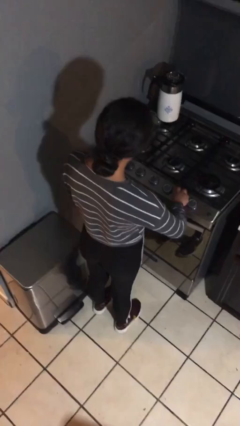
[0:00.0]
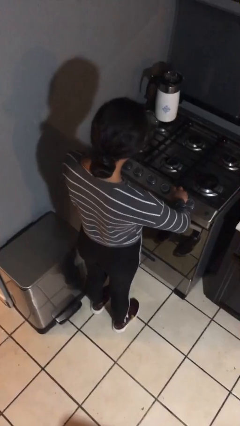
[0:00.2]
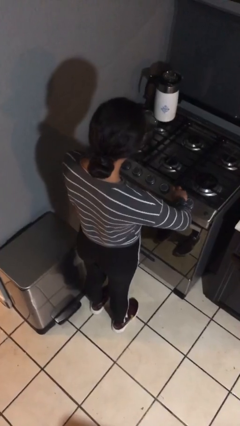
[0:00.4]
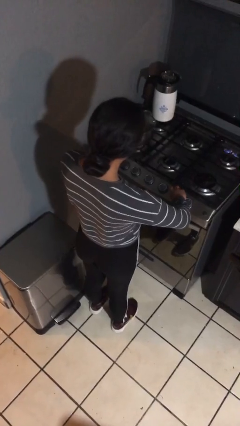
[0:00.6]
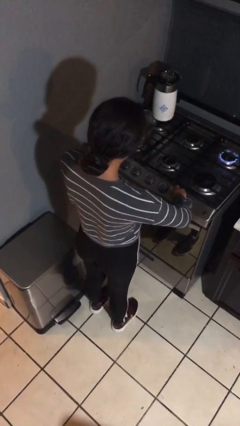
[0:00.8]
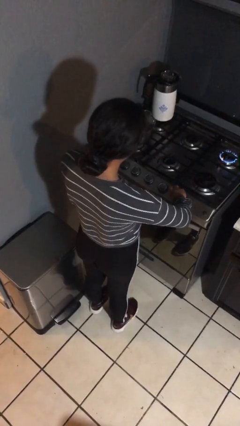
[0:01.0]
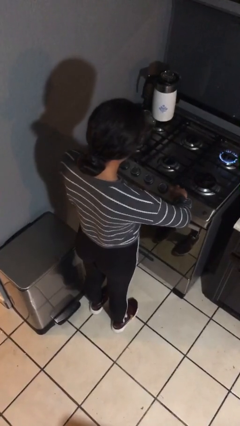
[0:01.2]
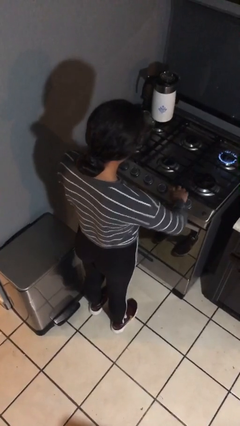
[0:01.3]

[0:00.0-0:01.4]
person turns on stovetop

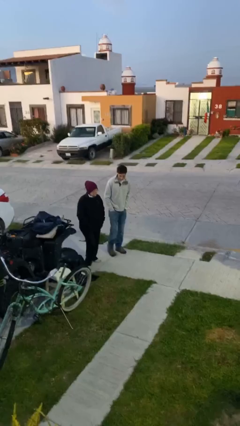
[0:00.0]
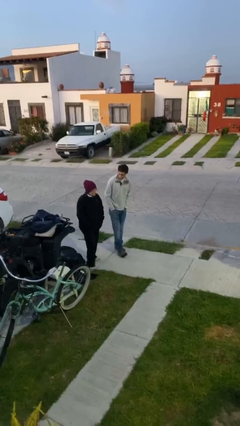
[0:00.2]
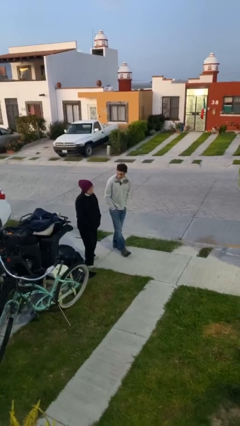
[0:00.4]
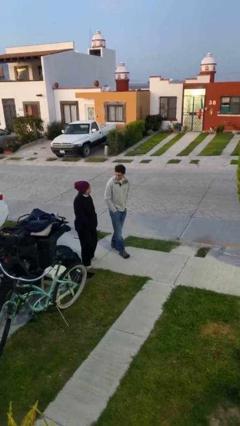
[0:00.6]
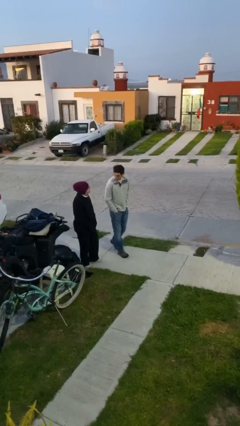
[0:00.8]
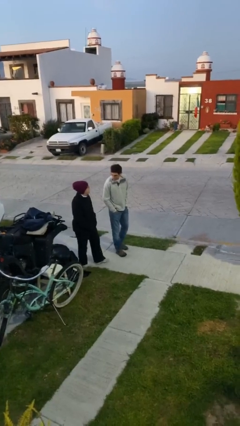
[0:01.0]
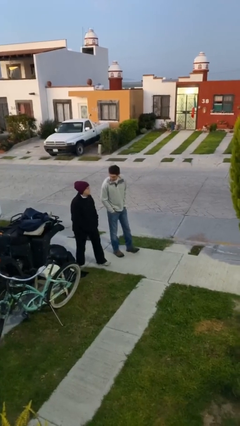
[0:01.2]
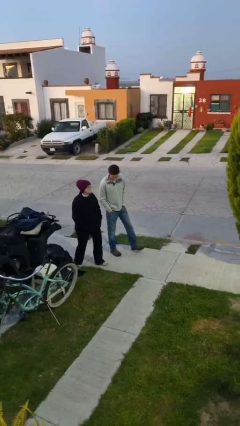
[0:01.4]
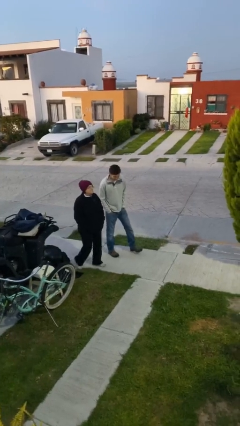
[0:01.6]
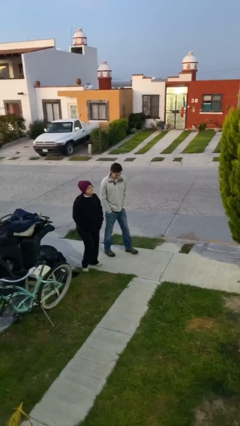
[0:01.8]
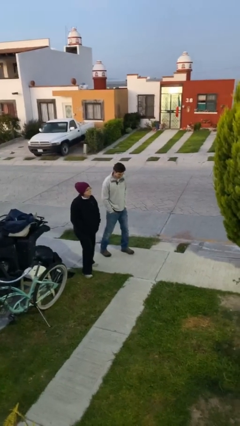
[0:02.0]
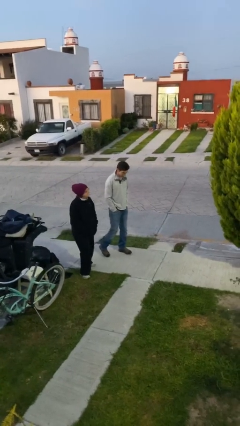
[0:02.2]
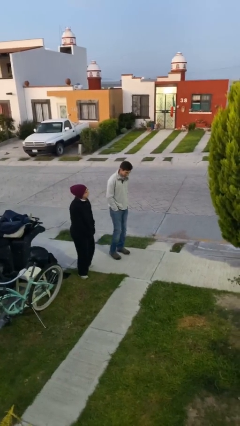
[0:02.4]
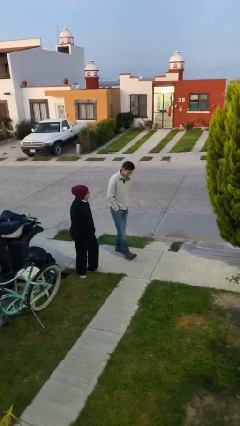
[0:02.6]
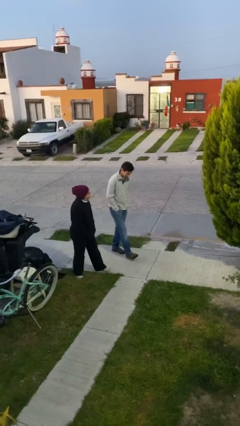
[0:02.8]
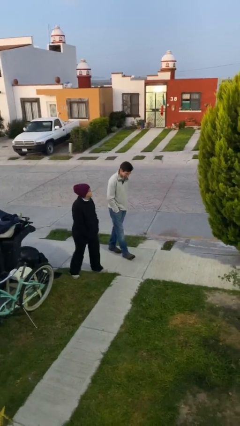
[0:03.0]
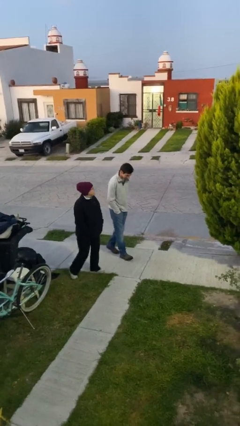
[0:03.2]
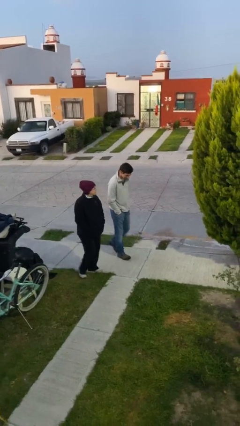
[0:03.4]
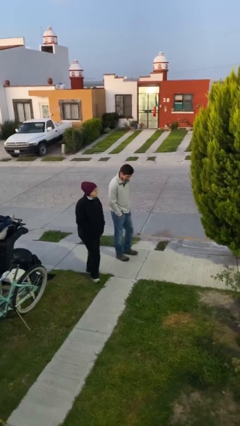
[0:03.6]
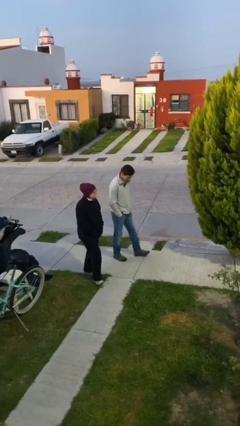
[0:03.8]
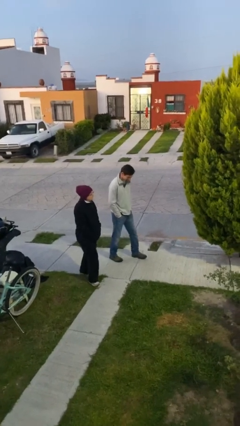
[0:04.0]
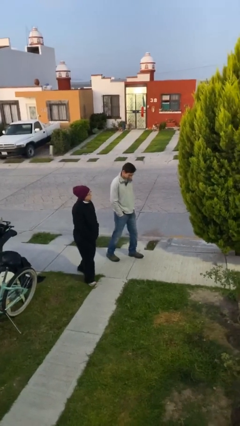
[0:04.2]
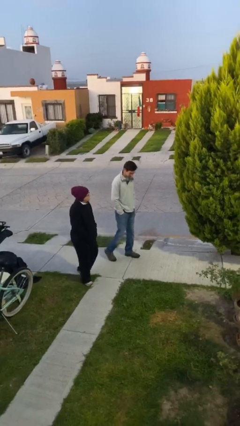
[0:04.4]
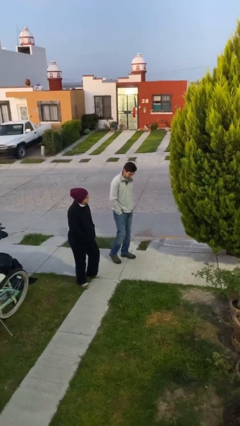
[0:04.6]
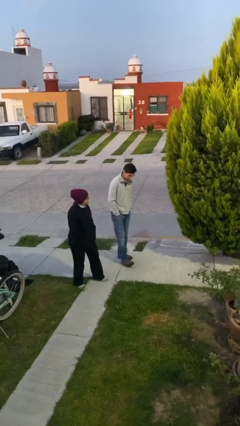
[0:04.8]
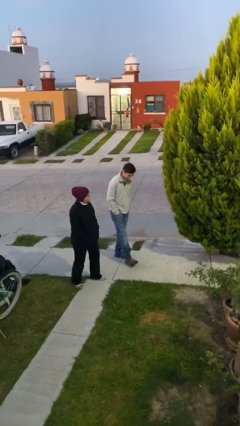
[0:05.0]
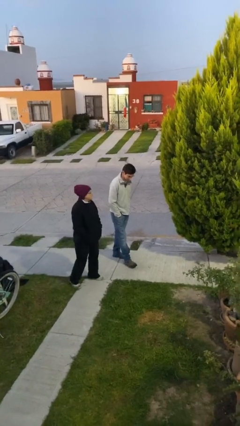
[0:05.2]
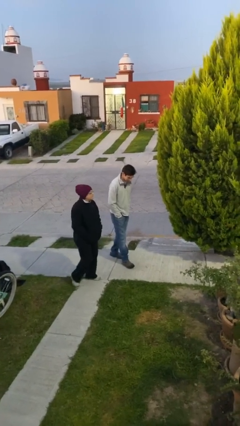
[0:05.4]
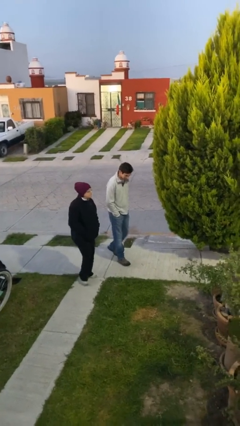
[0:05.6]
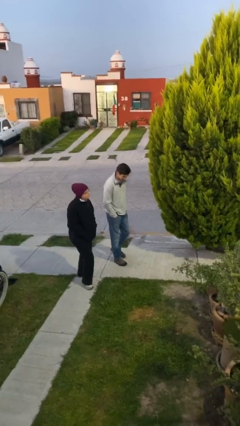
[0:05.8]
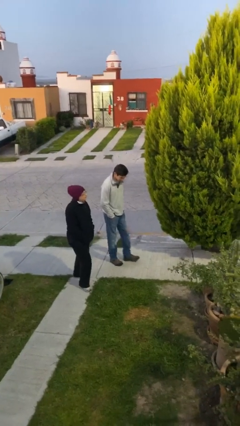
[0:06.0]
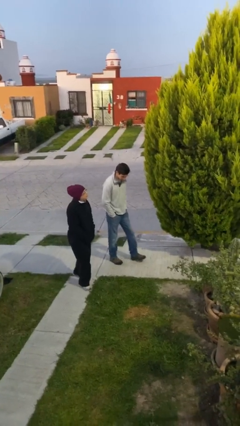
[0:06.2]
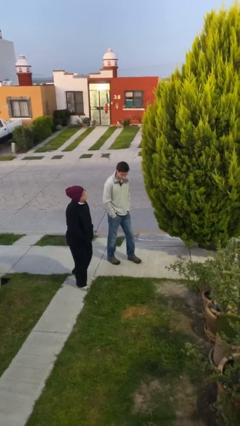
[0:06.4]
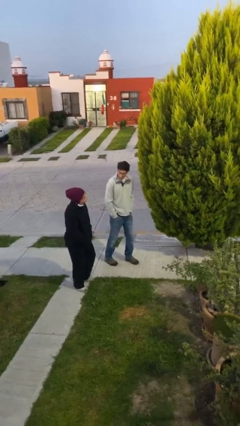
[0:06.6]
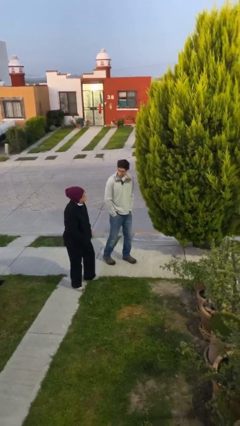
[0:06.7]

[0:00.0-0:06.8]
person talks to person

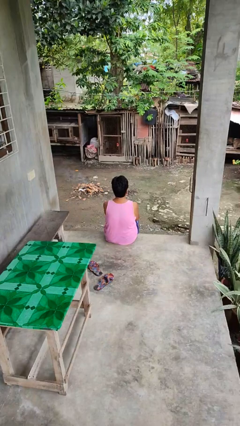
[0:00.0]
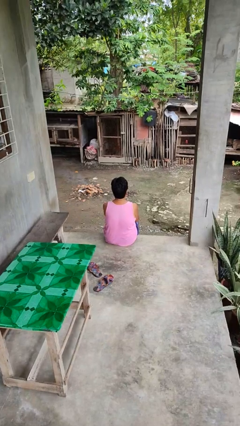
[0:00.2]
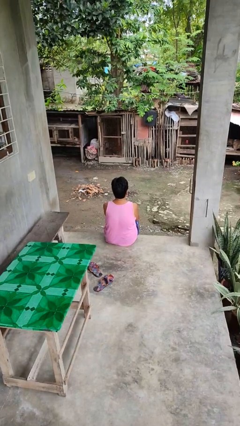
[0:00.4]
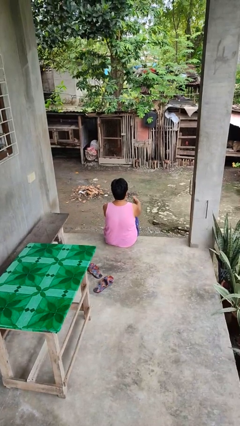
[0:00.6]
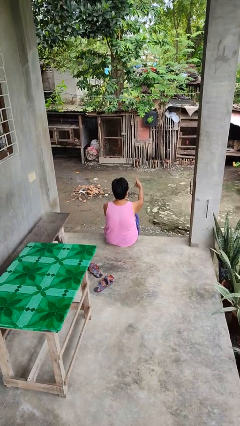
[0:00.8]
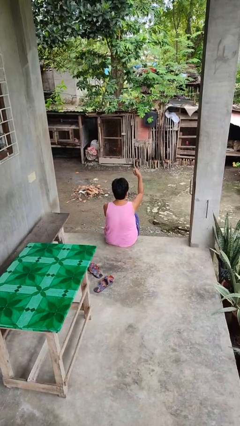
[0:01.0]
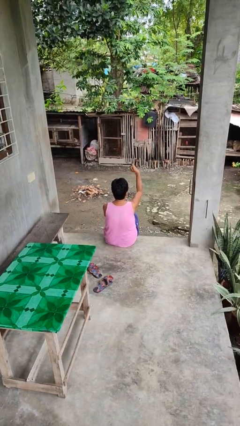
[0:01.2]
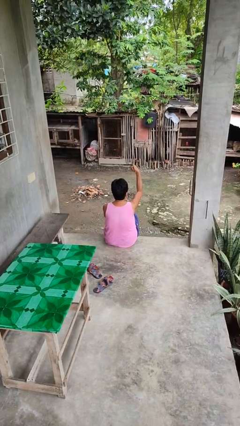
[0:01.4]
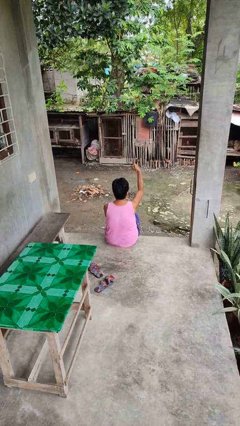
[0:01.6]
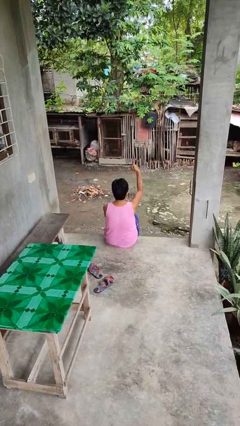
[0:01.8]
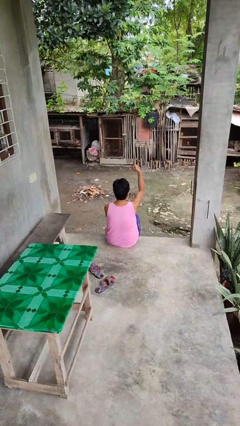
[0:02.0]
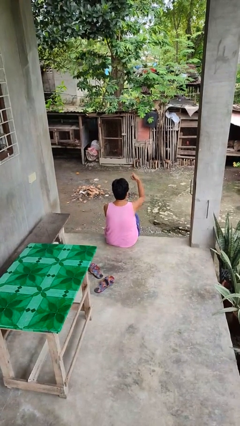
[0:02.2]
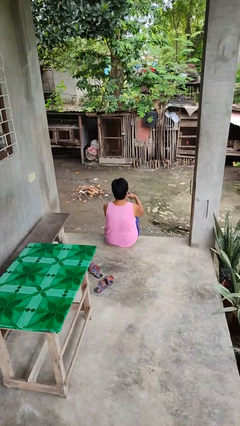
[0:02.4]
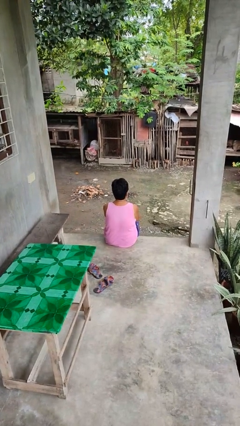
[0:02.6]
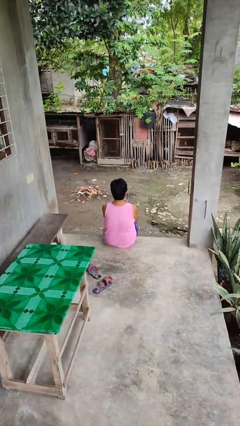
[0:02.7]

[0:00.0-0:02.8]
person gestures thumbs up

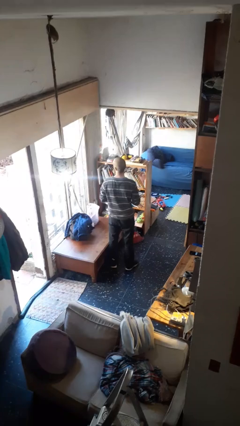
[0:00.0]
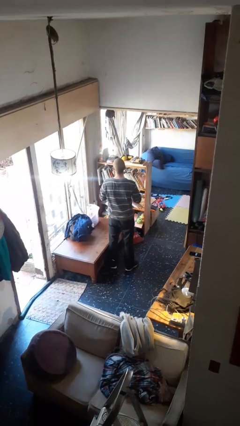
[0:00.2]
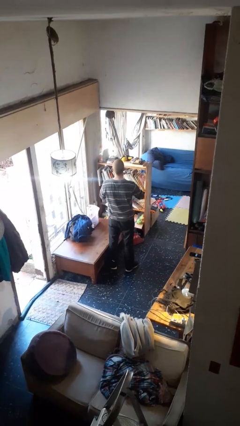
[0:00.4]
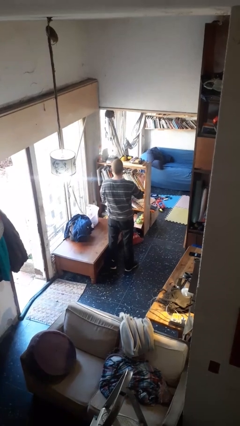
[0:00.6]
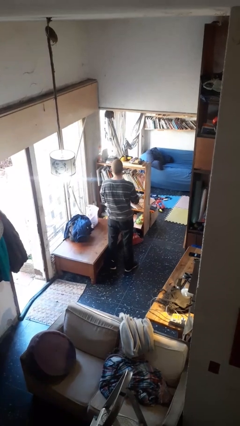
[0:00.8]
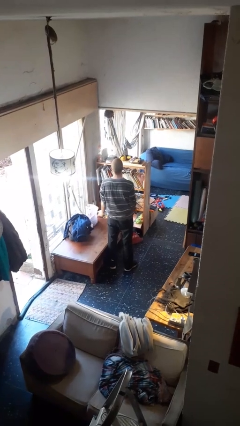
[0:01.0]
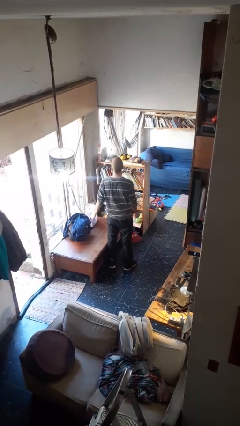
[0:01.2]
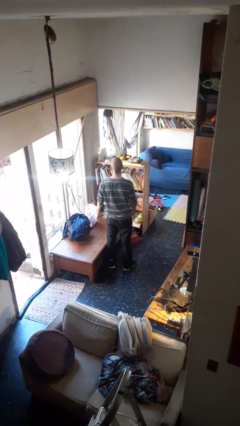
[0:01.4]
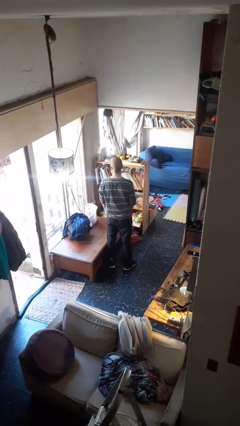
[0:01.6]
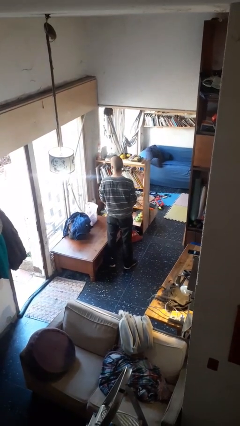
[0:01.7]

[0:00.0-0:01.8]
person puts on ring

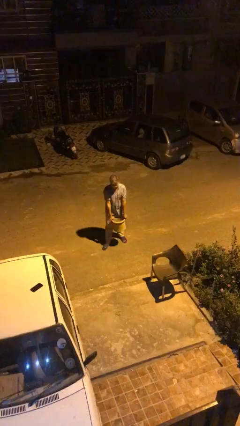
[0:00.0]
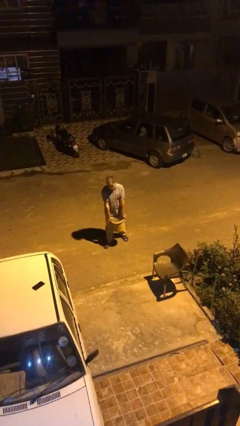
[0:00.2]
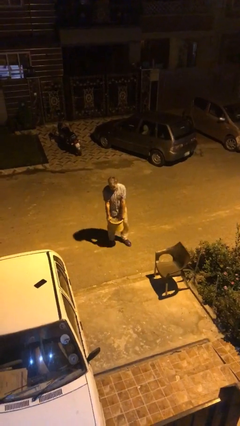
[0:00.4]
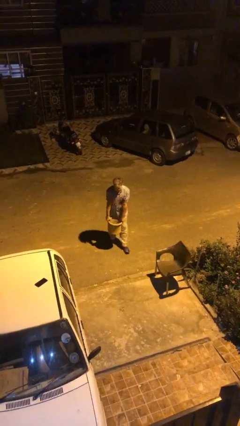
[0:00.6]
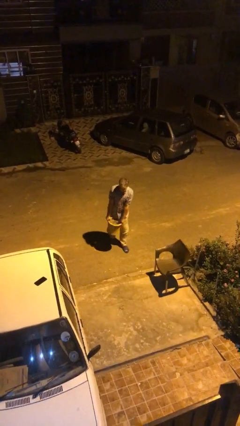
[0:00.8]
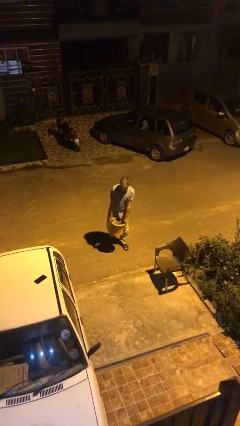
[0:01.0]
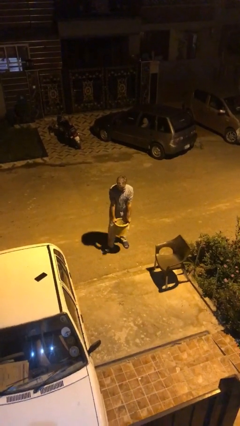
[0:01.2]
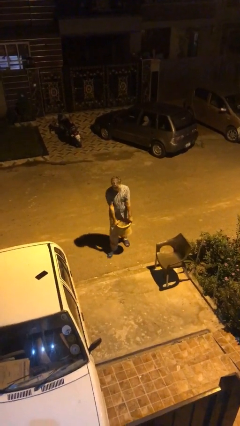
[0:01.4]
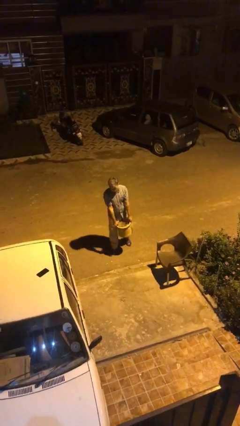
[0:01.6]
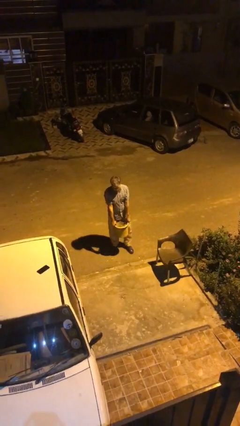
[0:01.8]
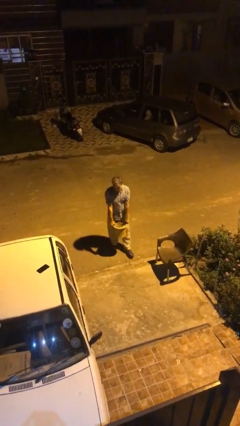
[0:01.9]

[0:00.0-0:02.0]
person carries heavy object

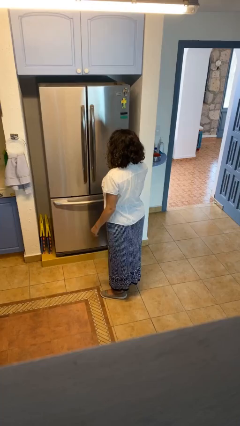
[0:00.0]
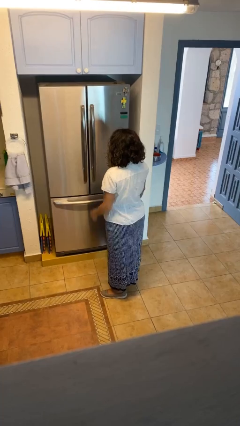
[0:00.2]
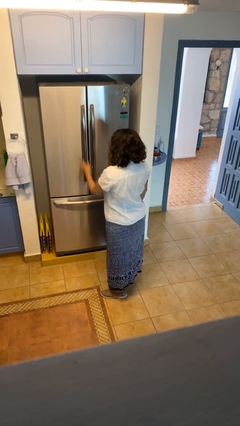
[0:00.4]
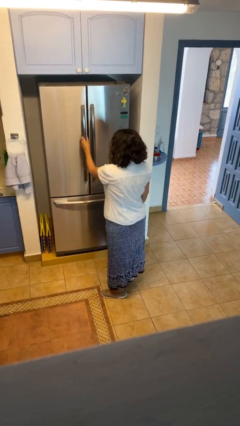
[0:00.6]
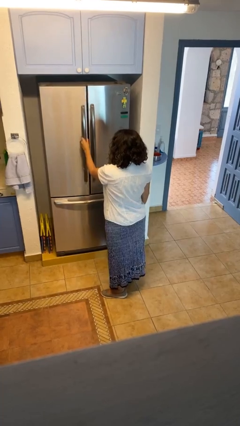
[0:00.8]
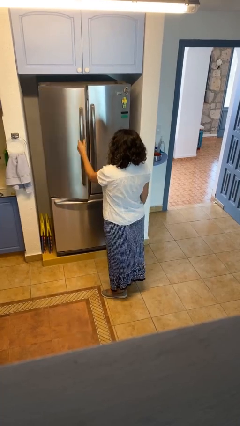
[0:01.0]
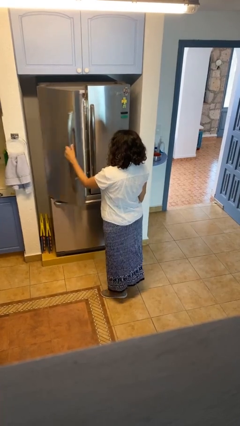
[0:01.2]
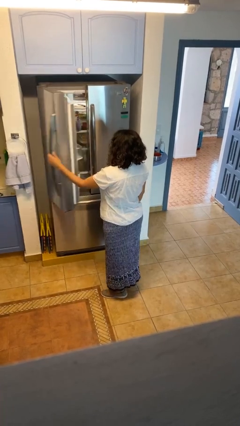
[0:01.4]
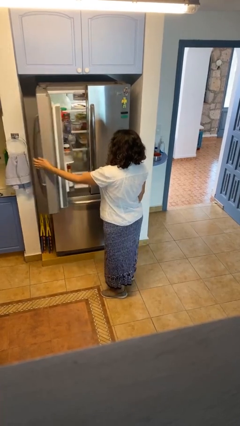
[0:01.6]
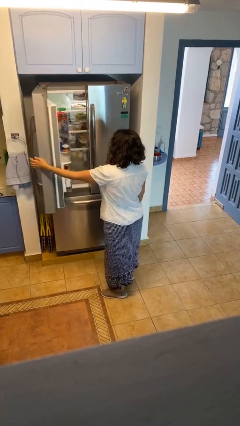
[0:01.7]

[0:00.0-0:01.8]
person opens refrigerator

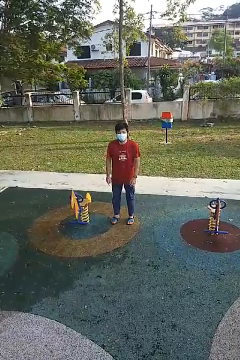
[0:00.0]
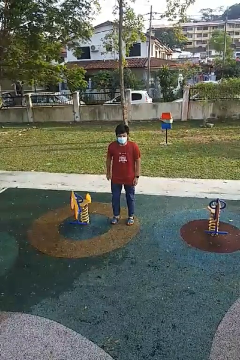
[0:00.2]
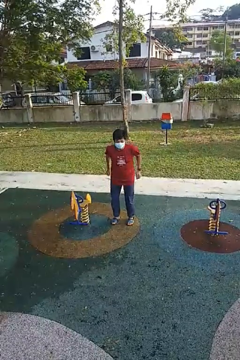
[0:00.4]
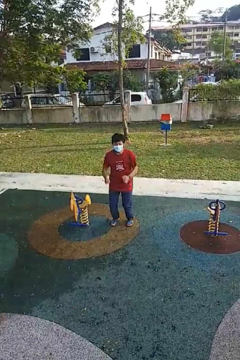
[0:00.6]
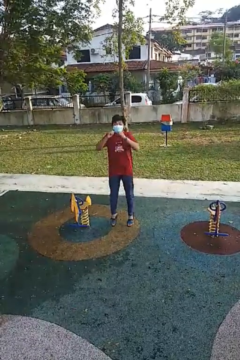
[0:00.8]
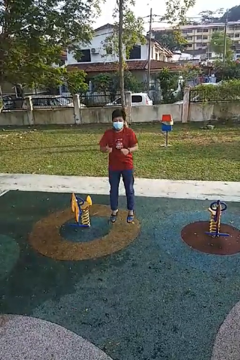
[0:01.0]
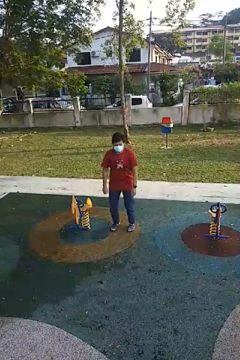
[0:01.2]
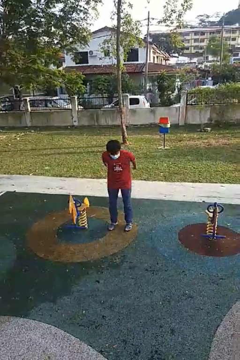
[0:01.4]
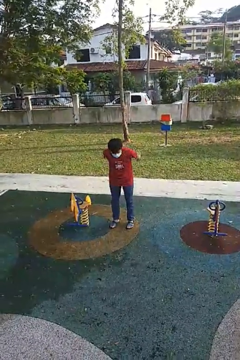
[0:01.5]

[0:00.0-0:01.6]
person jumps
